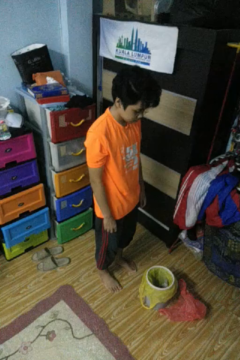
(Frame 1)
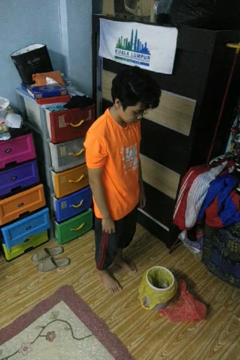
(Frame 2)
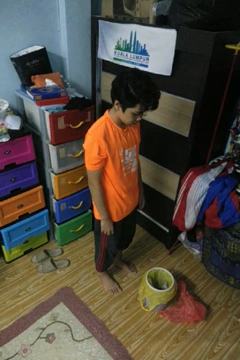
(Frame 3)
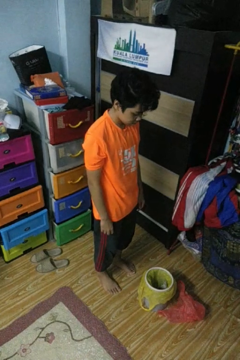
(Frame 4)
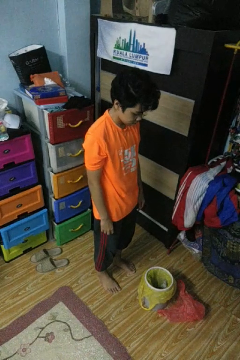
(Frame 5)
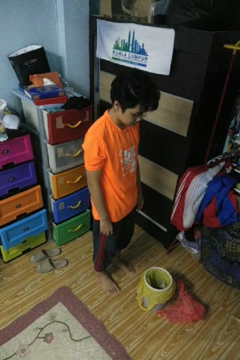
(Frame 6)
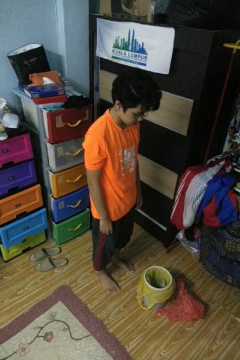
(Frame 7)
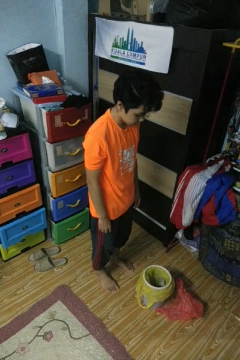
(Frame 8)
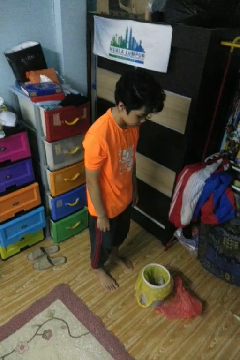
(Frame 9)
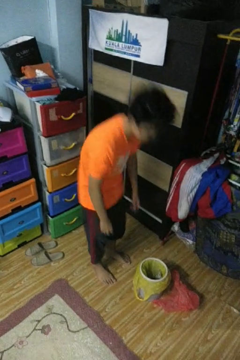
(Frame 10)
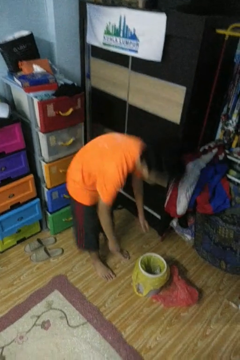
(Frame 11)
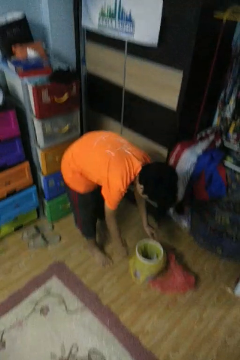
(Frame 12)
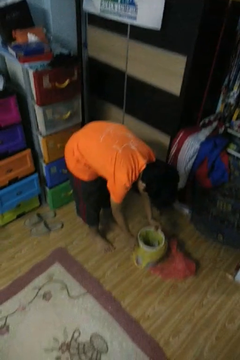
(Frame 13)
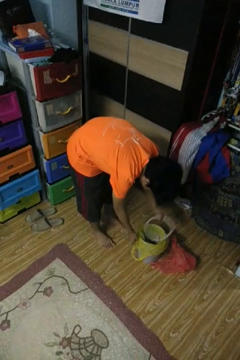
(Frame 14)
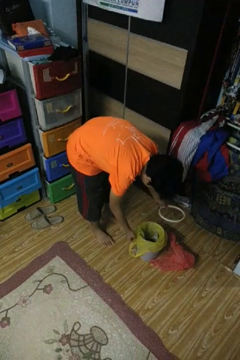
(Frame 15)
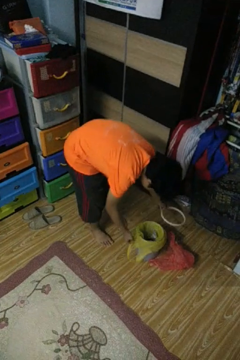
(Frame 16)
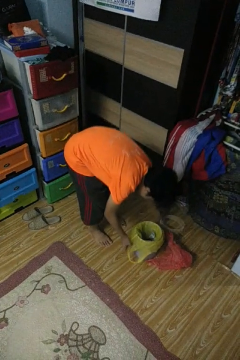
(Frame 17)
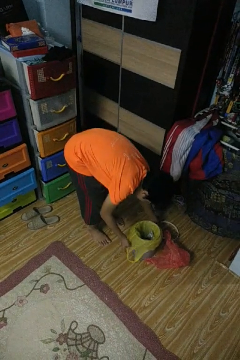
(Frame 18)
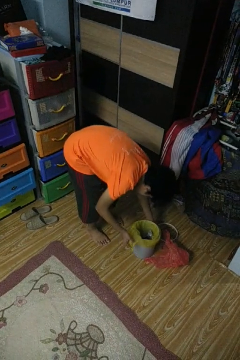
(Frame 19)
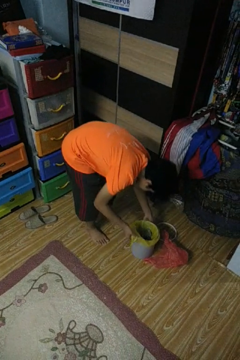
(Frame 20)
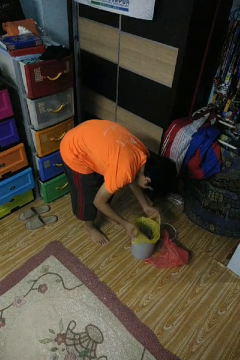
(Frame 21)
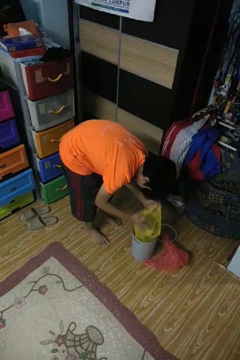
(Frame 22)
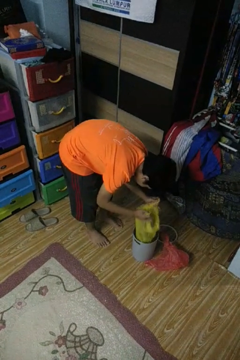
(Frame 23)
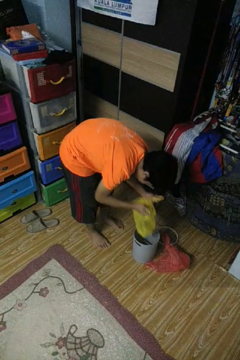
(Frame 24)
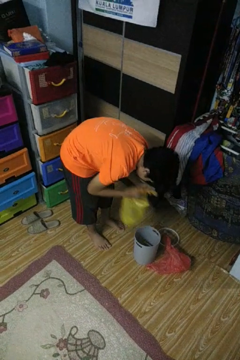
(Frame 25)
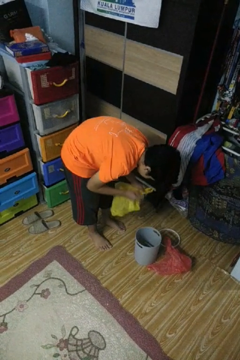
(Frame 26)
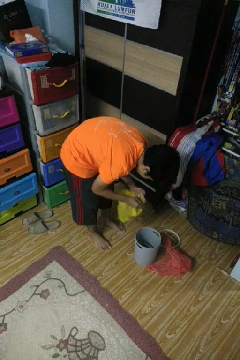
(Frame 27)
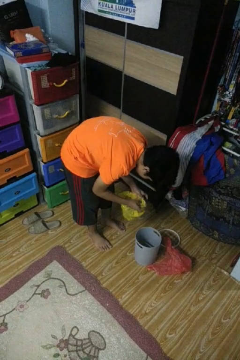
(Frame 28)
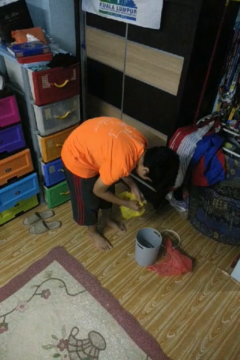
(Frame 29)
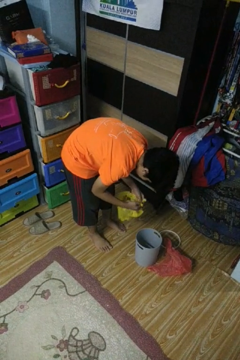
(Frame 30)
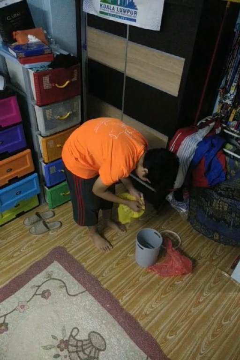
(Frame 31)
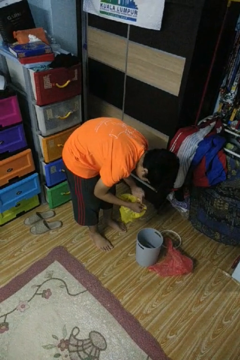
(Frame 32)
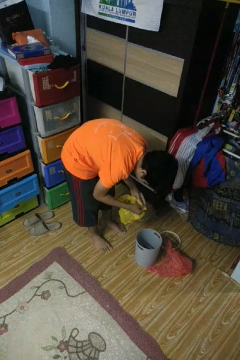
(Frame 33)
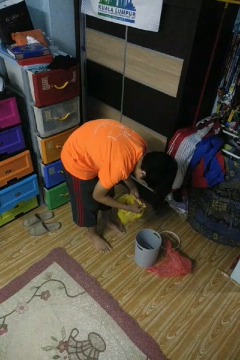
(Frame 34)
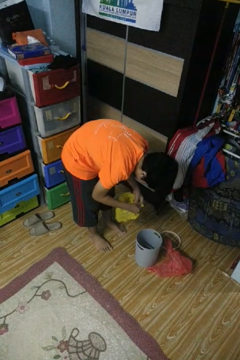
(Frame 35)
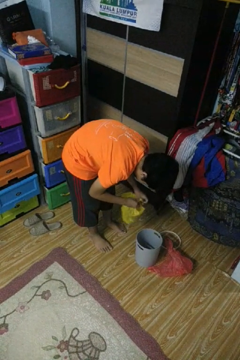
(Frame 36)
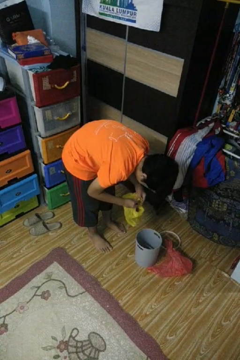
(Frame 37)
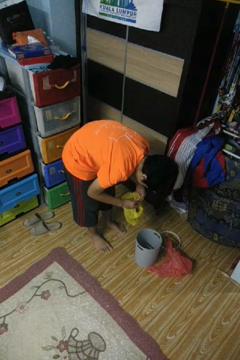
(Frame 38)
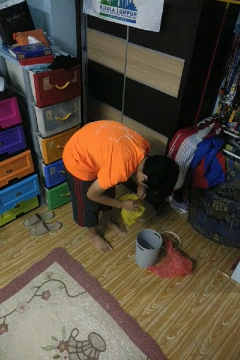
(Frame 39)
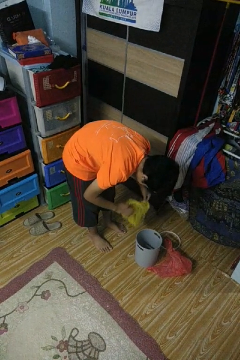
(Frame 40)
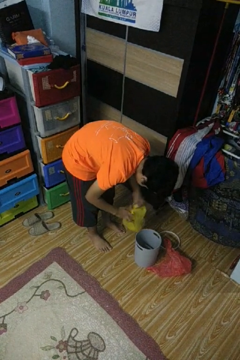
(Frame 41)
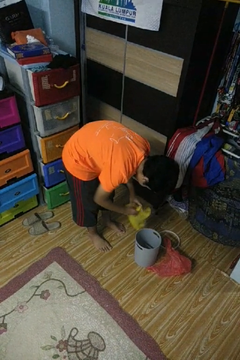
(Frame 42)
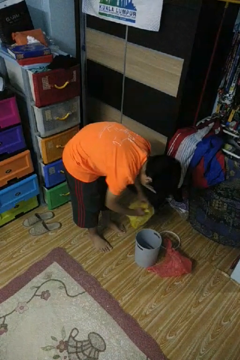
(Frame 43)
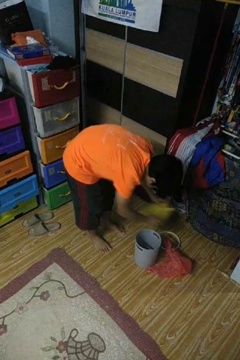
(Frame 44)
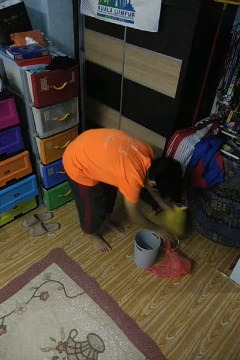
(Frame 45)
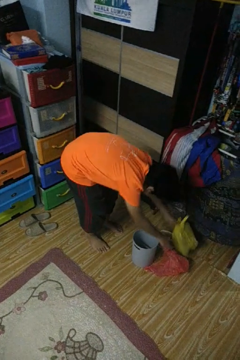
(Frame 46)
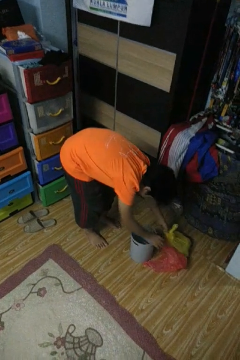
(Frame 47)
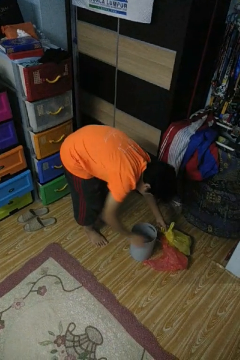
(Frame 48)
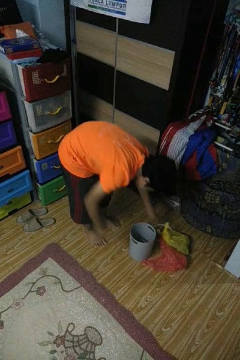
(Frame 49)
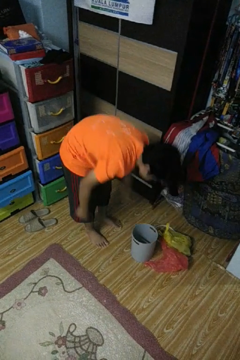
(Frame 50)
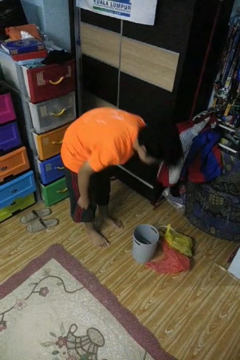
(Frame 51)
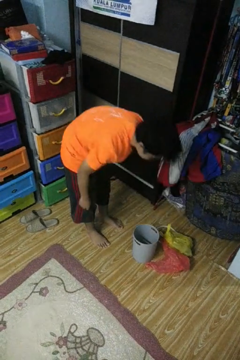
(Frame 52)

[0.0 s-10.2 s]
person removes trashbag from trashcan

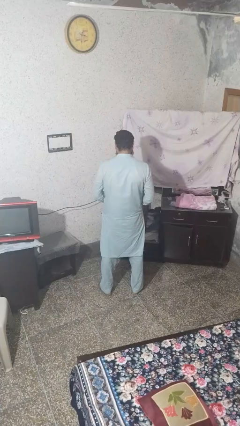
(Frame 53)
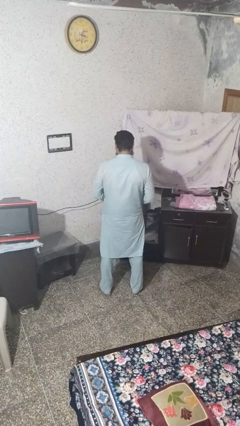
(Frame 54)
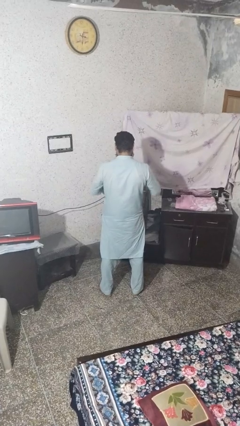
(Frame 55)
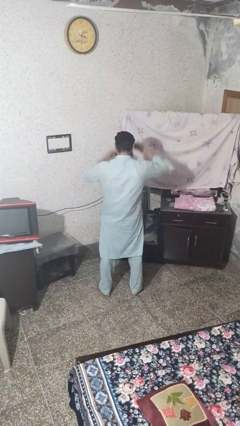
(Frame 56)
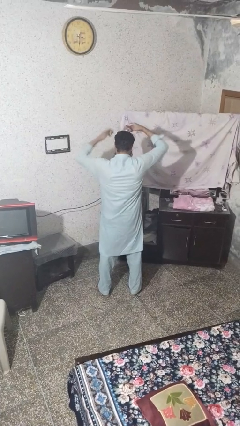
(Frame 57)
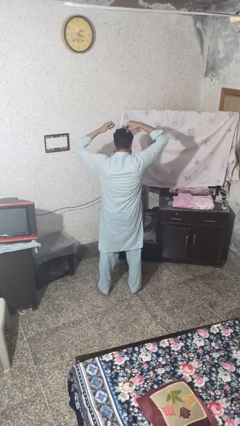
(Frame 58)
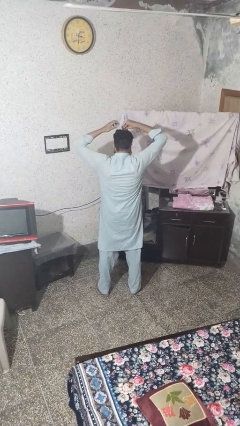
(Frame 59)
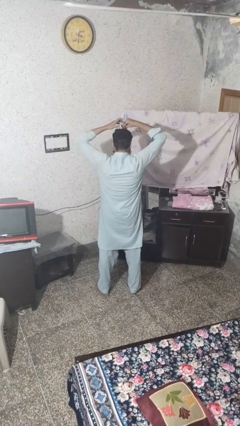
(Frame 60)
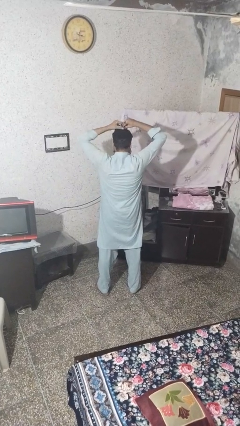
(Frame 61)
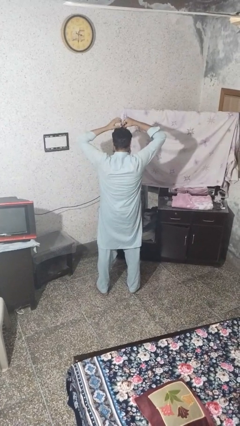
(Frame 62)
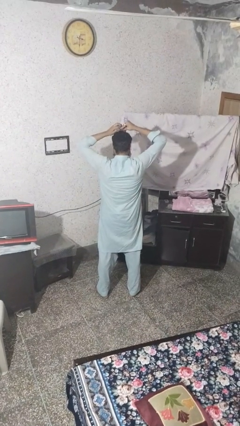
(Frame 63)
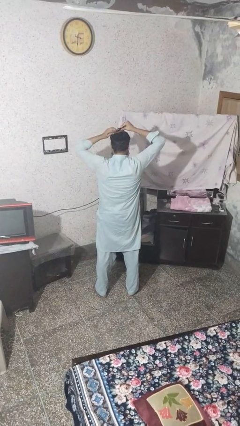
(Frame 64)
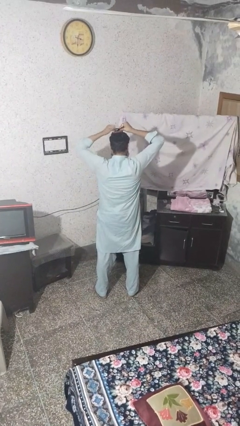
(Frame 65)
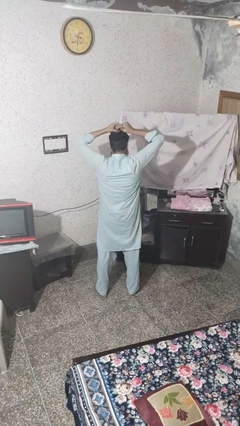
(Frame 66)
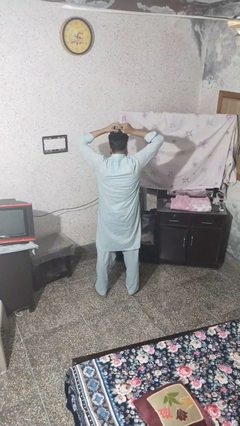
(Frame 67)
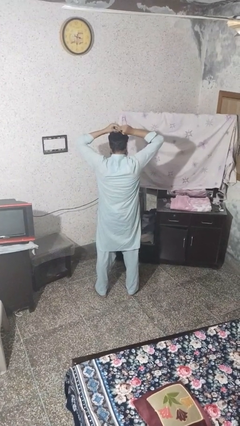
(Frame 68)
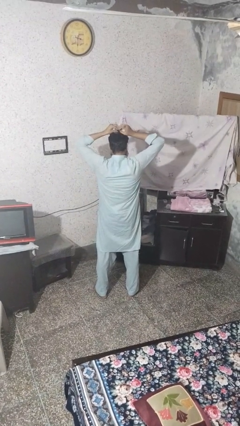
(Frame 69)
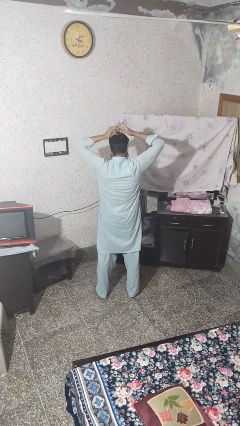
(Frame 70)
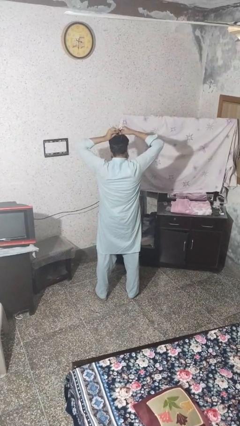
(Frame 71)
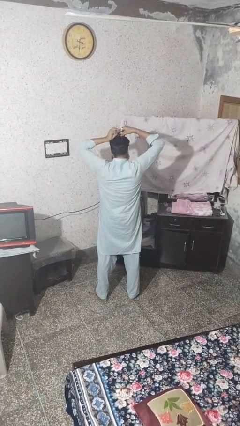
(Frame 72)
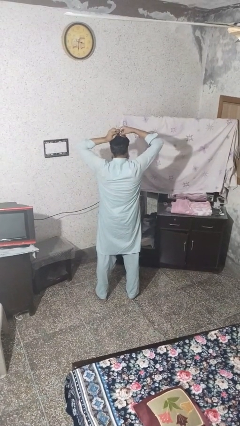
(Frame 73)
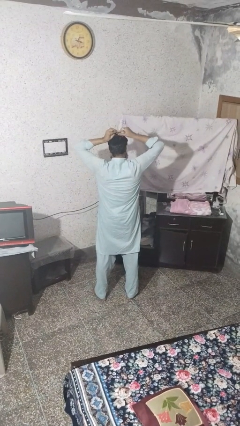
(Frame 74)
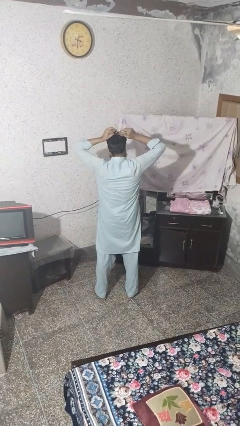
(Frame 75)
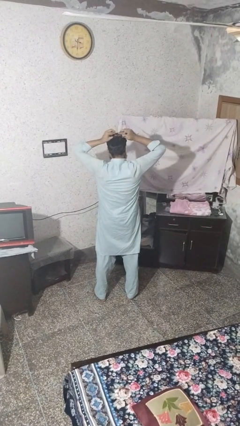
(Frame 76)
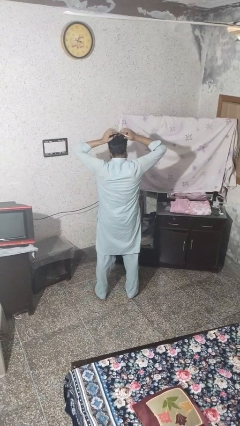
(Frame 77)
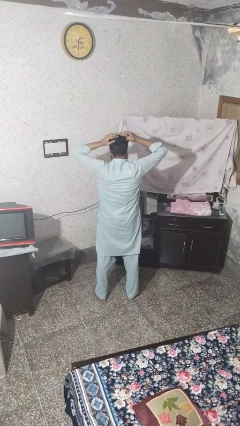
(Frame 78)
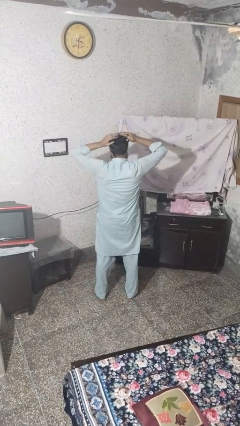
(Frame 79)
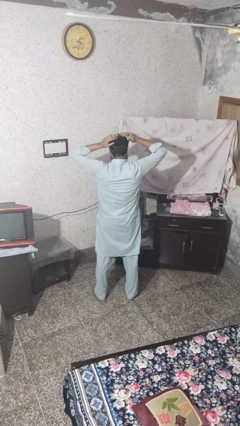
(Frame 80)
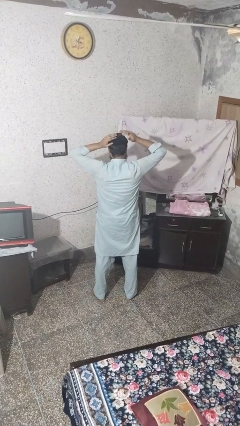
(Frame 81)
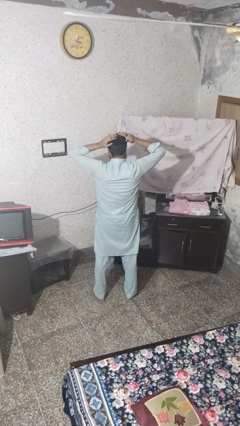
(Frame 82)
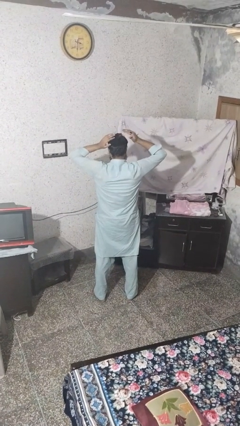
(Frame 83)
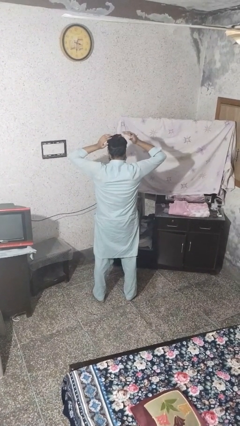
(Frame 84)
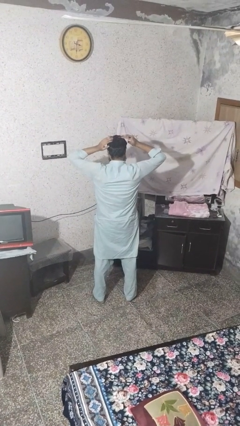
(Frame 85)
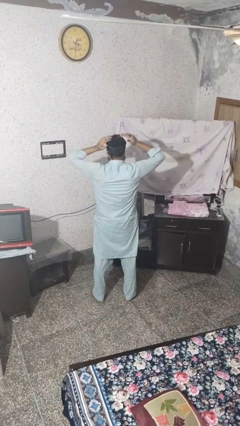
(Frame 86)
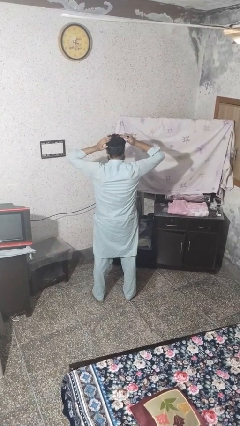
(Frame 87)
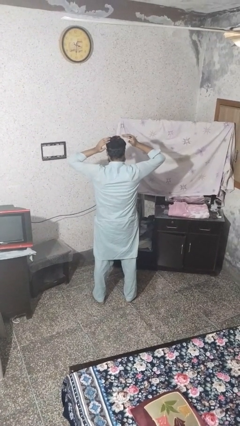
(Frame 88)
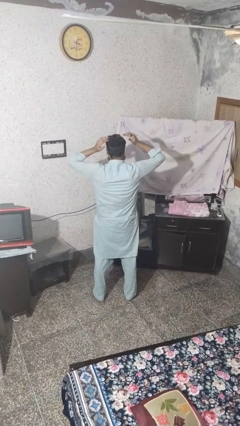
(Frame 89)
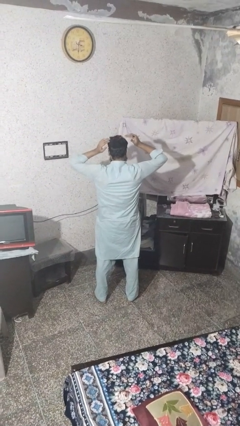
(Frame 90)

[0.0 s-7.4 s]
person puts hair in ponytail

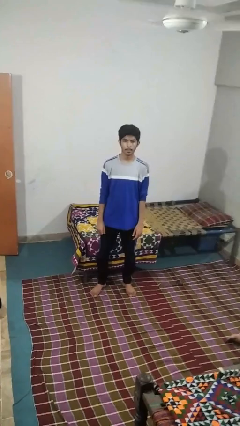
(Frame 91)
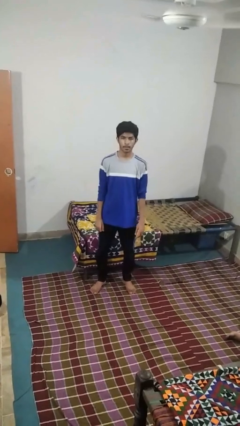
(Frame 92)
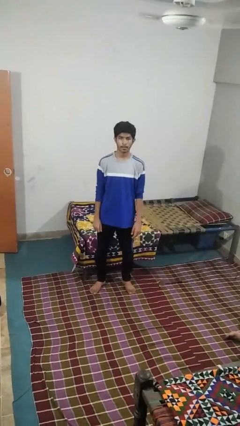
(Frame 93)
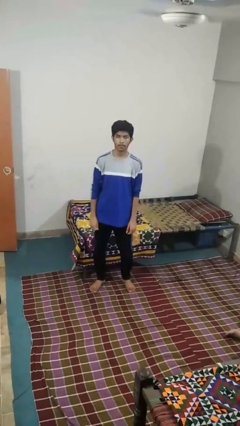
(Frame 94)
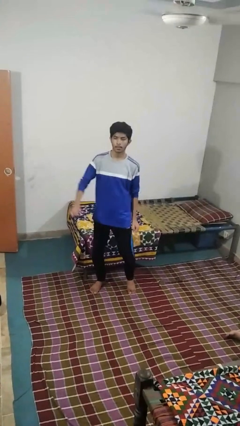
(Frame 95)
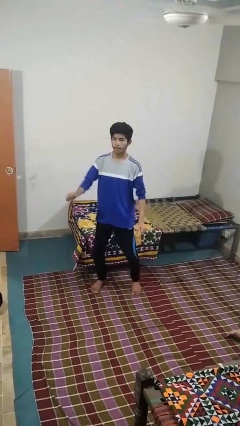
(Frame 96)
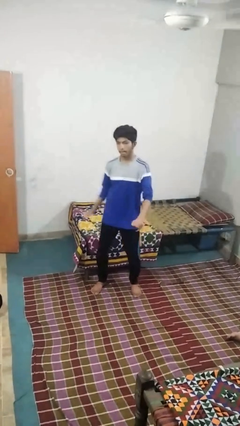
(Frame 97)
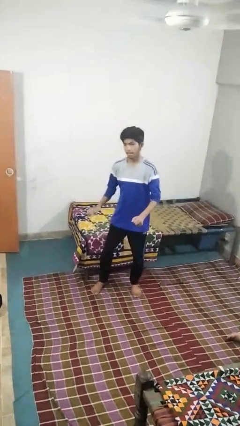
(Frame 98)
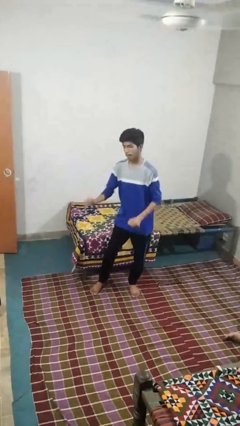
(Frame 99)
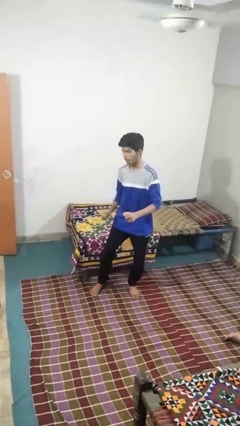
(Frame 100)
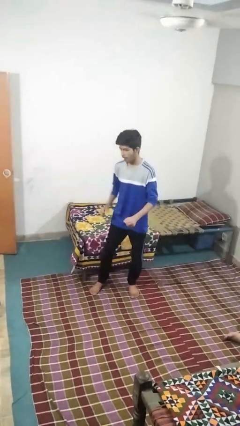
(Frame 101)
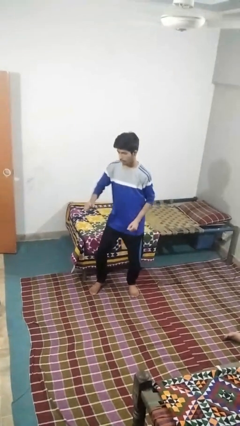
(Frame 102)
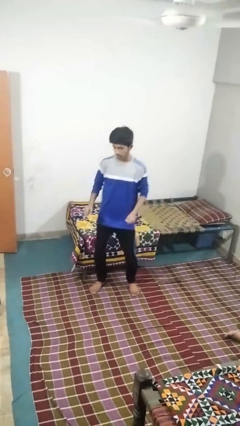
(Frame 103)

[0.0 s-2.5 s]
person dances in place
